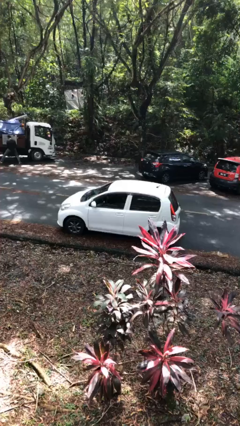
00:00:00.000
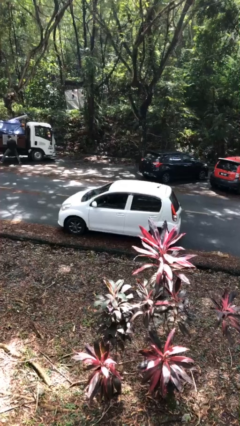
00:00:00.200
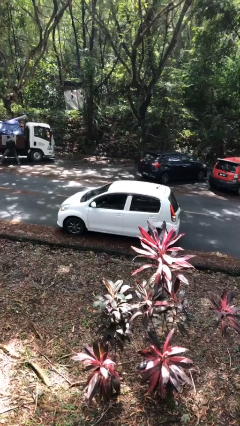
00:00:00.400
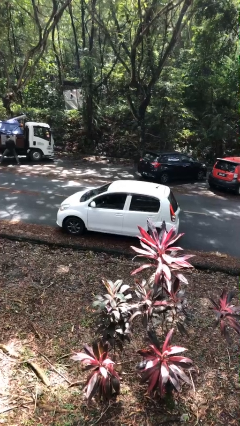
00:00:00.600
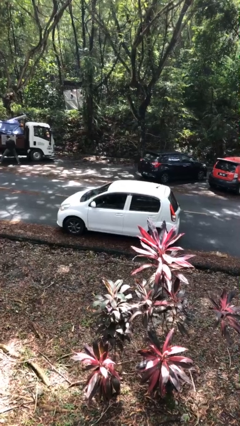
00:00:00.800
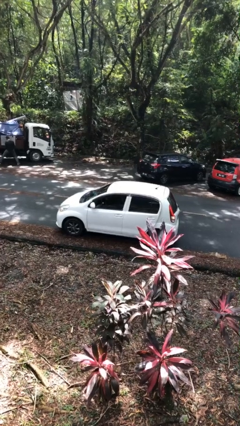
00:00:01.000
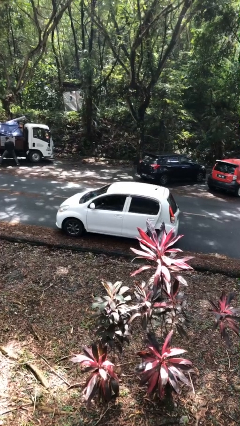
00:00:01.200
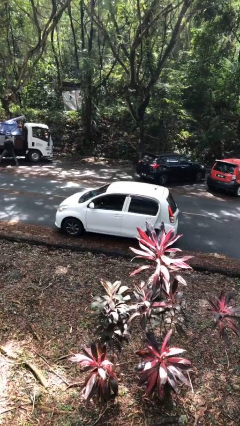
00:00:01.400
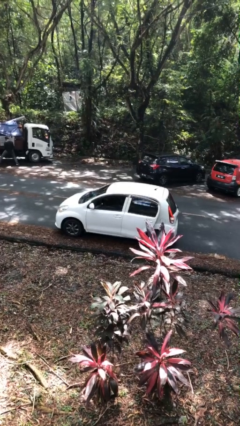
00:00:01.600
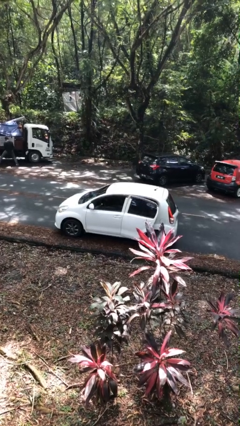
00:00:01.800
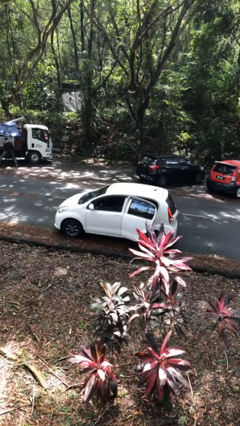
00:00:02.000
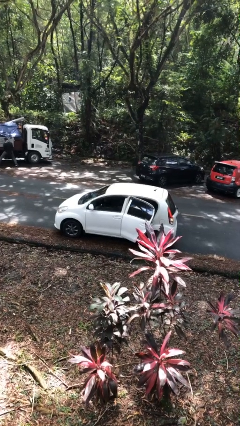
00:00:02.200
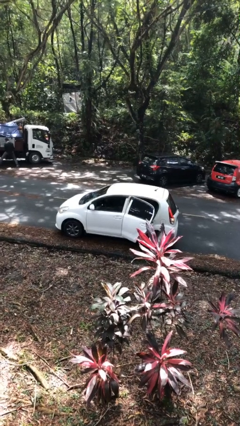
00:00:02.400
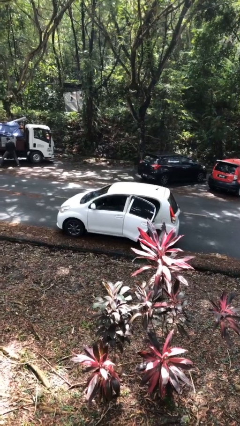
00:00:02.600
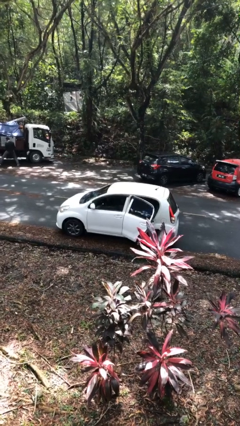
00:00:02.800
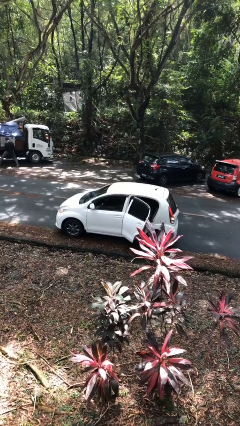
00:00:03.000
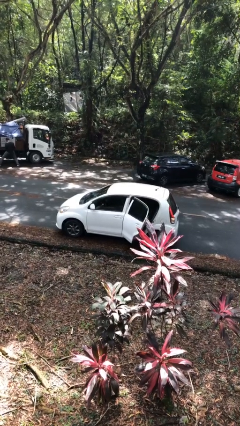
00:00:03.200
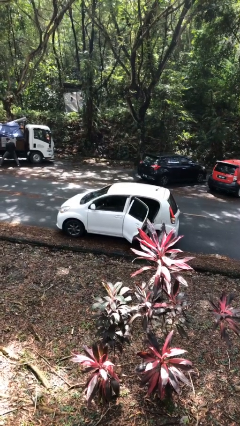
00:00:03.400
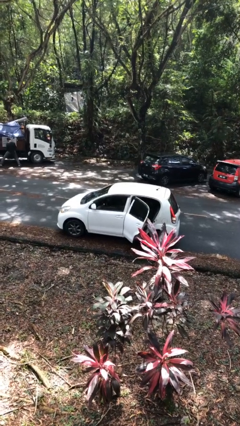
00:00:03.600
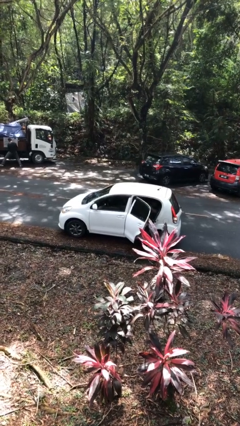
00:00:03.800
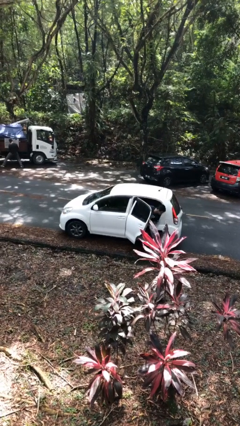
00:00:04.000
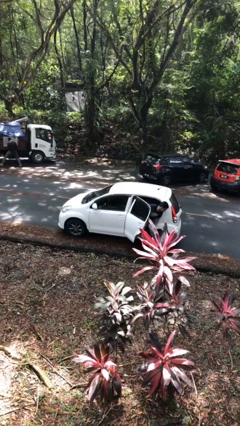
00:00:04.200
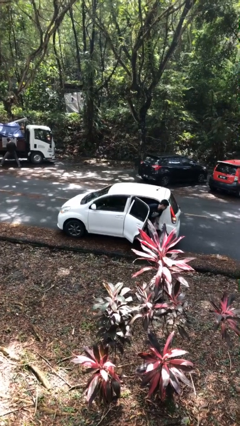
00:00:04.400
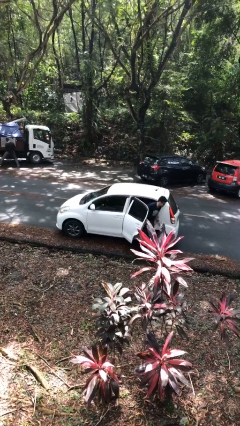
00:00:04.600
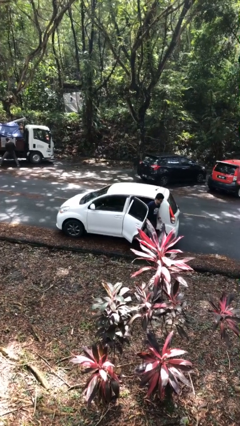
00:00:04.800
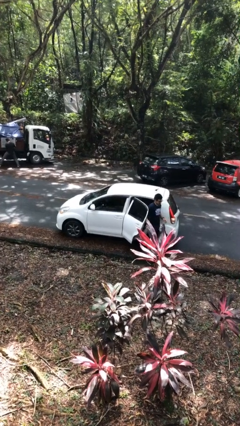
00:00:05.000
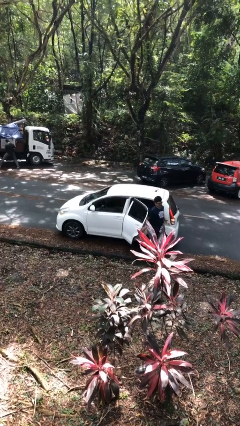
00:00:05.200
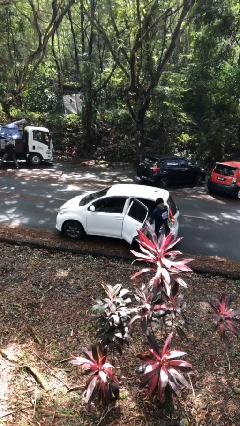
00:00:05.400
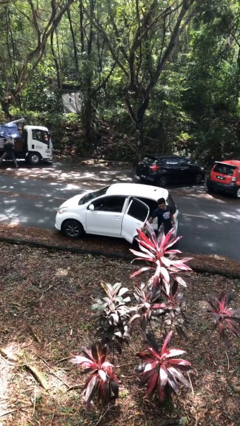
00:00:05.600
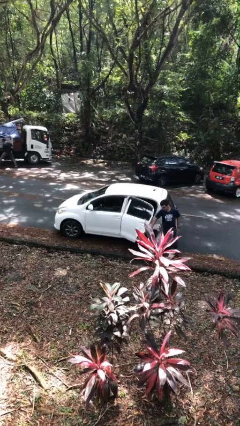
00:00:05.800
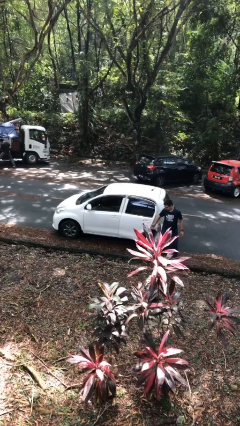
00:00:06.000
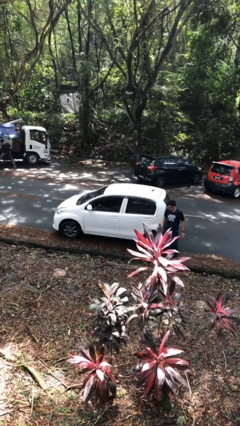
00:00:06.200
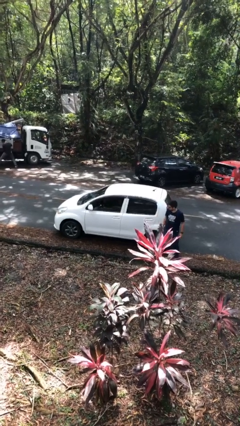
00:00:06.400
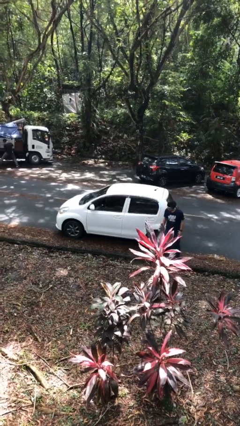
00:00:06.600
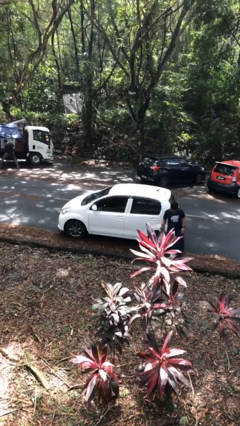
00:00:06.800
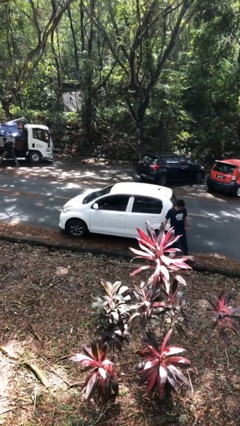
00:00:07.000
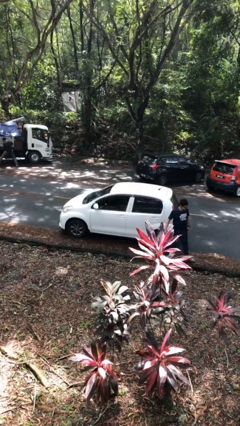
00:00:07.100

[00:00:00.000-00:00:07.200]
car drops off person

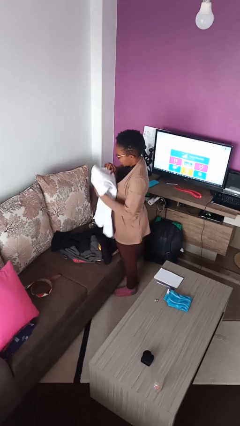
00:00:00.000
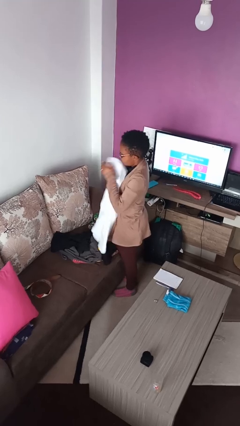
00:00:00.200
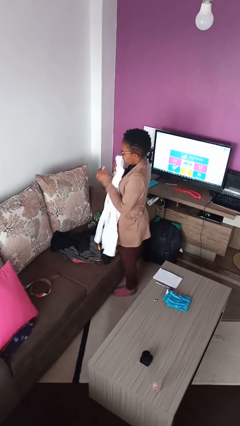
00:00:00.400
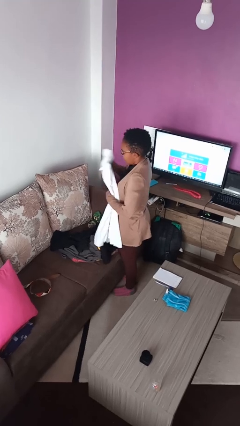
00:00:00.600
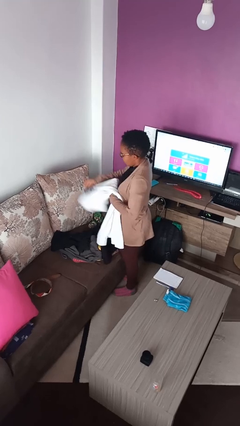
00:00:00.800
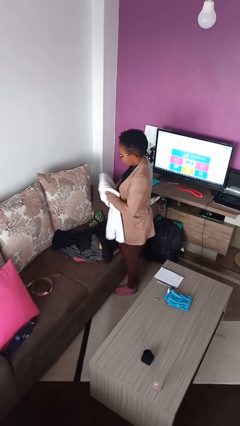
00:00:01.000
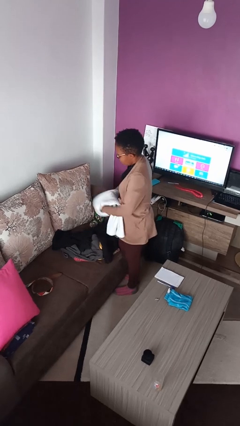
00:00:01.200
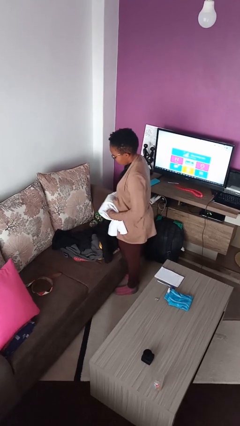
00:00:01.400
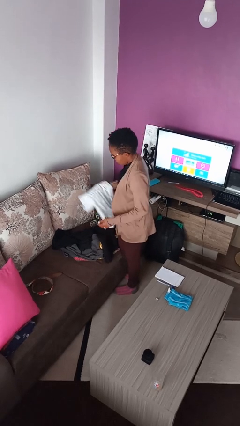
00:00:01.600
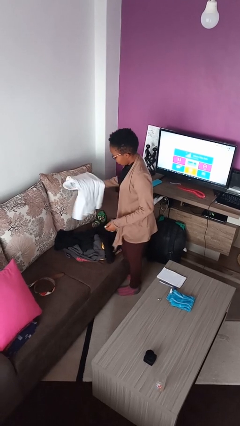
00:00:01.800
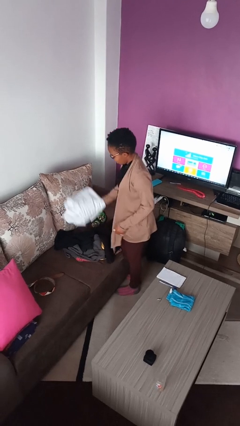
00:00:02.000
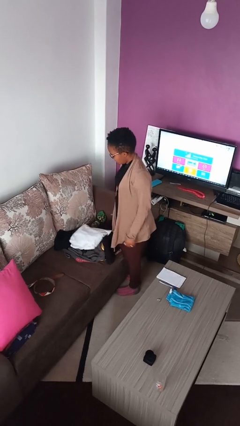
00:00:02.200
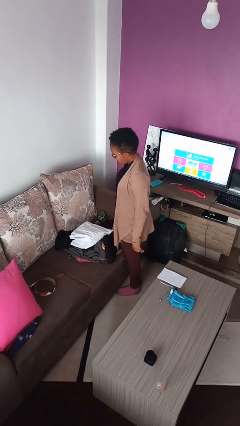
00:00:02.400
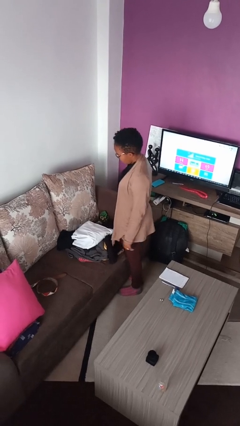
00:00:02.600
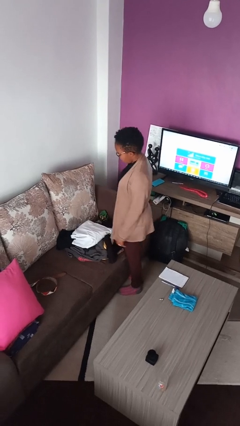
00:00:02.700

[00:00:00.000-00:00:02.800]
person folds shirt

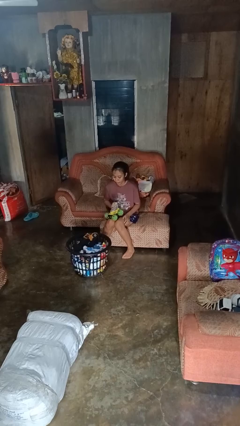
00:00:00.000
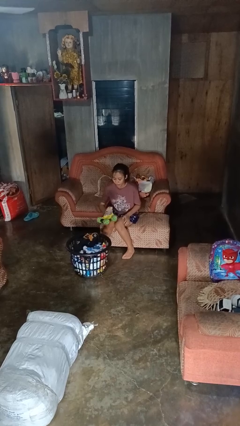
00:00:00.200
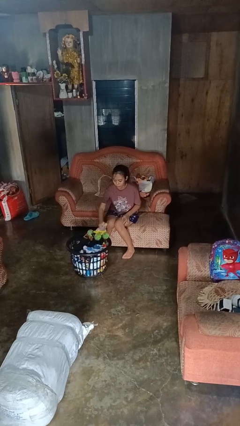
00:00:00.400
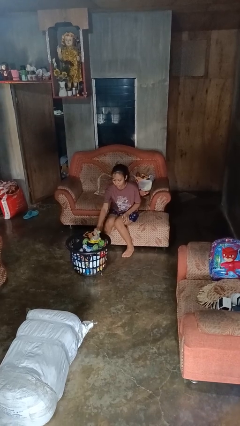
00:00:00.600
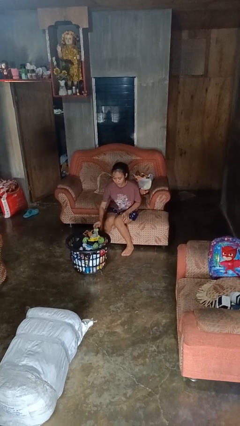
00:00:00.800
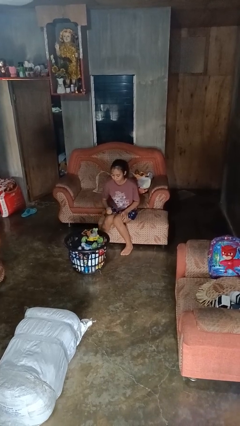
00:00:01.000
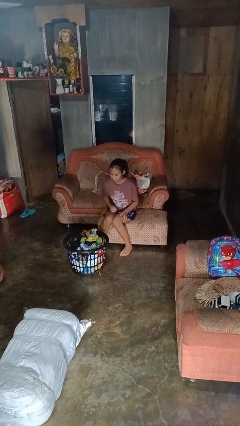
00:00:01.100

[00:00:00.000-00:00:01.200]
person puts object into basket

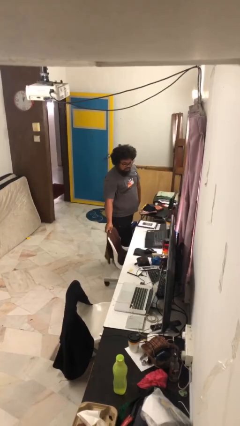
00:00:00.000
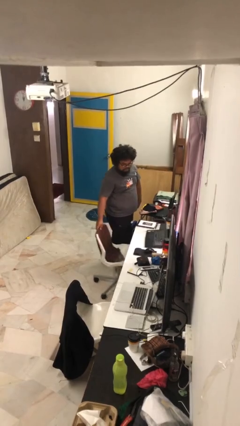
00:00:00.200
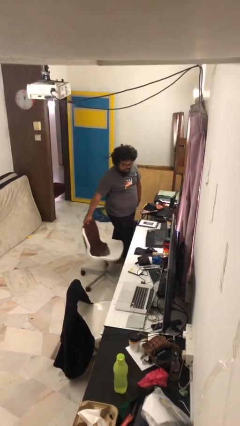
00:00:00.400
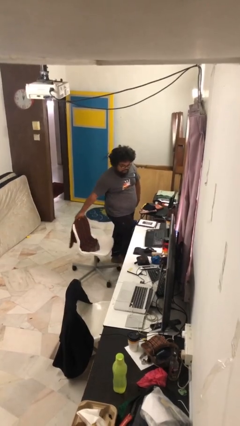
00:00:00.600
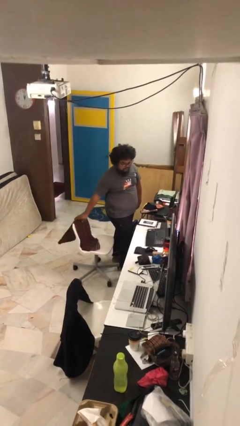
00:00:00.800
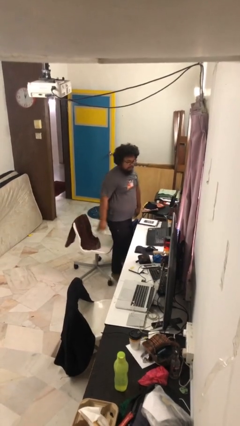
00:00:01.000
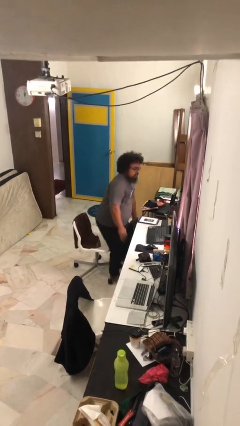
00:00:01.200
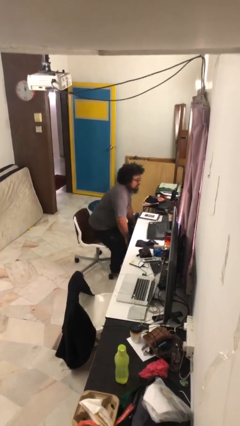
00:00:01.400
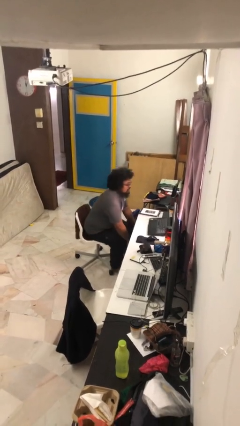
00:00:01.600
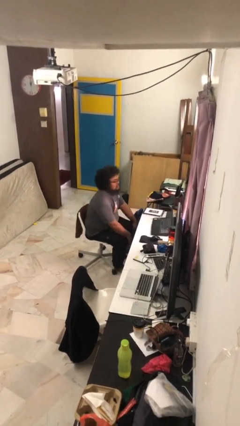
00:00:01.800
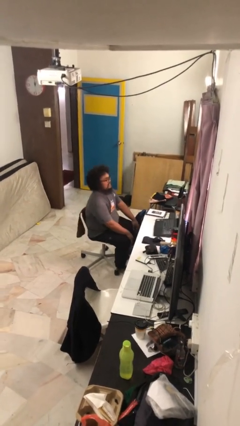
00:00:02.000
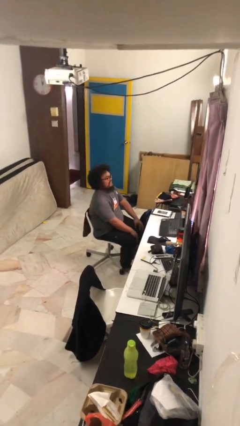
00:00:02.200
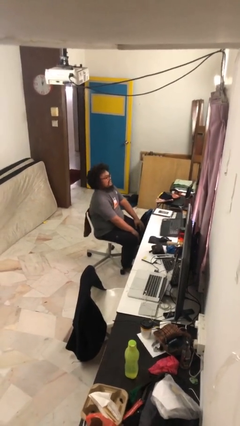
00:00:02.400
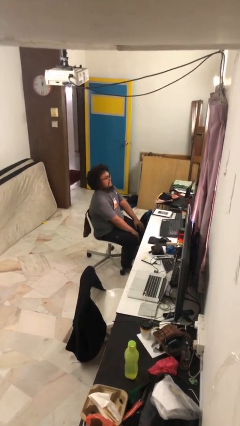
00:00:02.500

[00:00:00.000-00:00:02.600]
person sits down

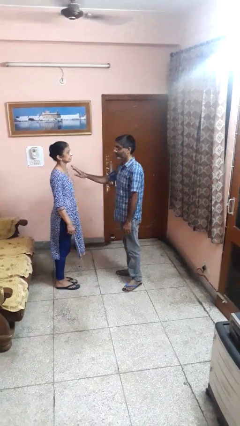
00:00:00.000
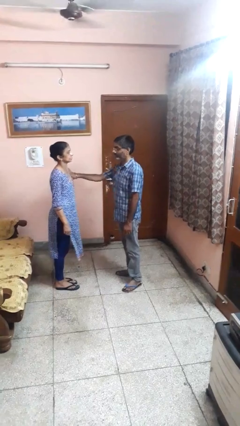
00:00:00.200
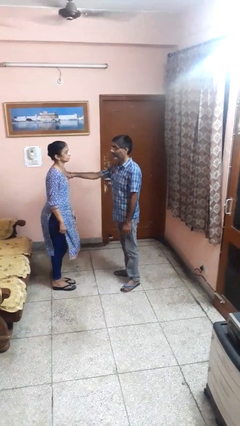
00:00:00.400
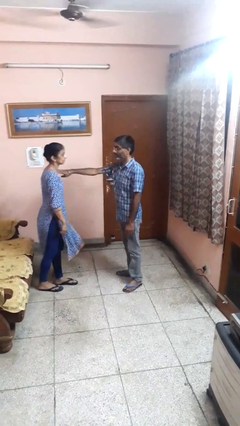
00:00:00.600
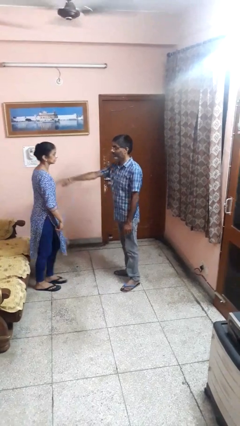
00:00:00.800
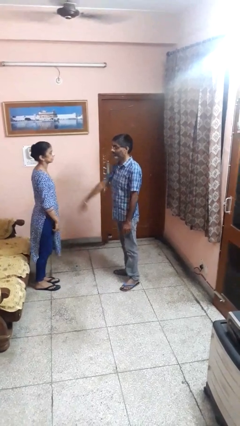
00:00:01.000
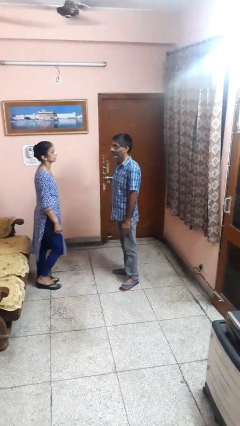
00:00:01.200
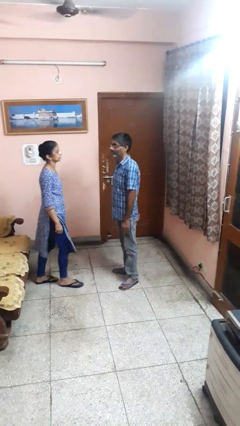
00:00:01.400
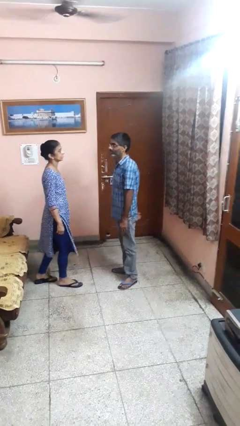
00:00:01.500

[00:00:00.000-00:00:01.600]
person shoves person

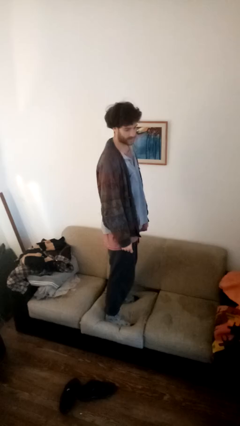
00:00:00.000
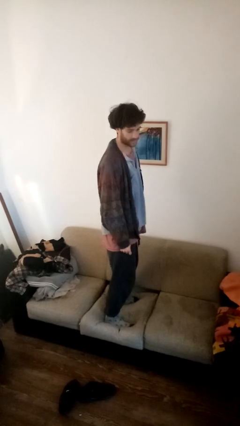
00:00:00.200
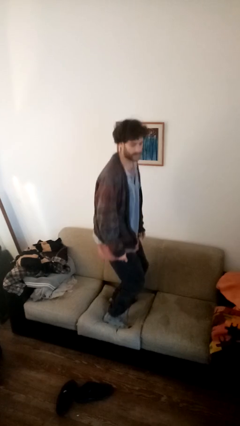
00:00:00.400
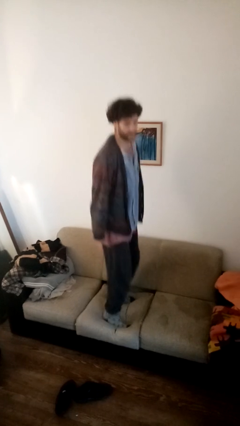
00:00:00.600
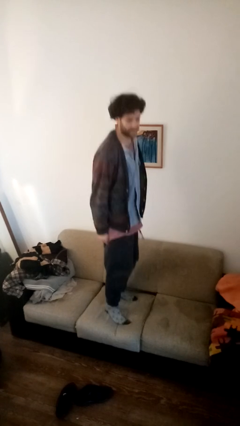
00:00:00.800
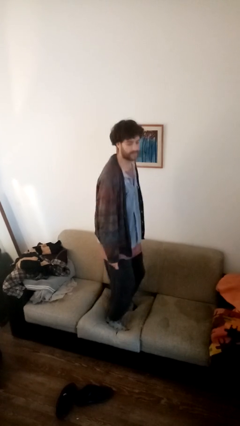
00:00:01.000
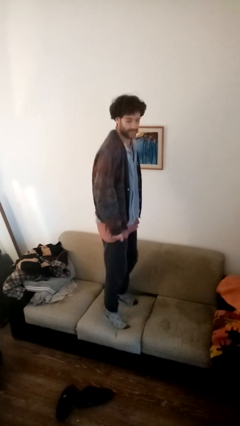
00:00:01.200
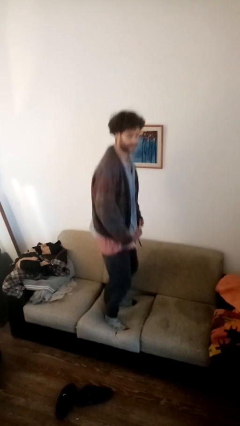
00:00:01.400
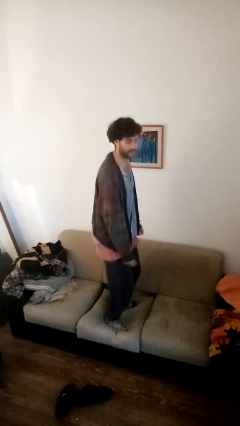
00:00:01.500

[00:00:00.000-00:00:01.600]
person jumps on couch
